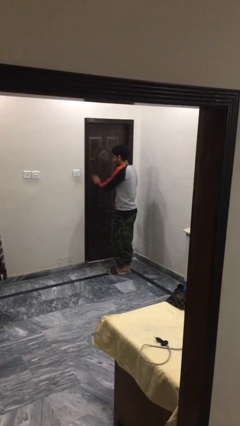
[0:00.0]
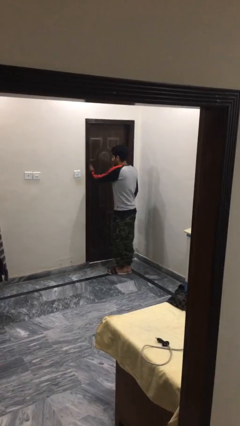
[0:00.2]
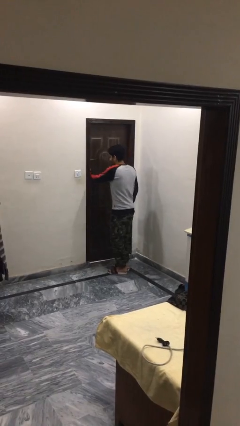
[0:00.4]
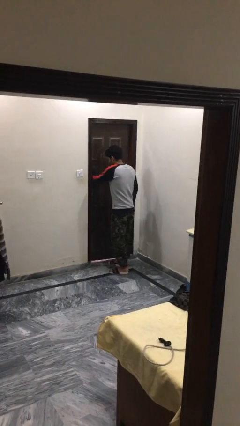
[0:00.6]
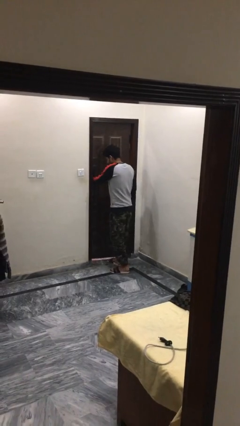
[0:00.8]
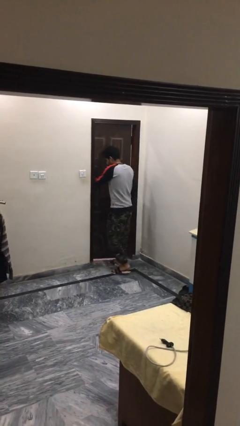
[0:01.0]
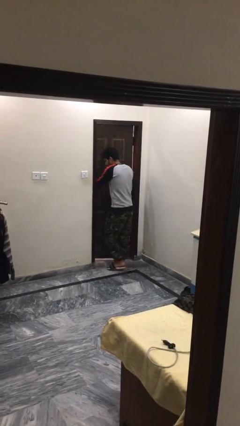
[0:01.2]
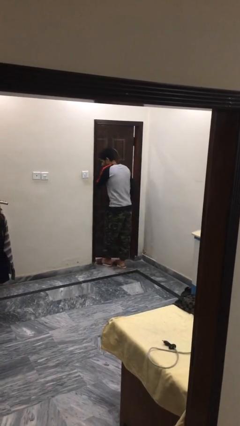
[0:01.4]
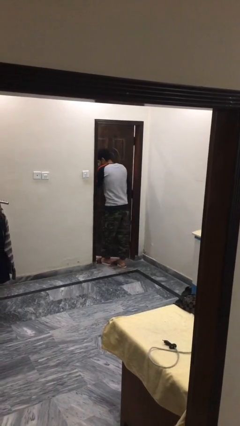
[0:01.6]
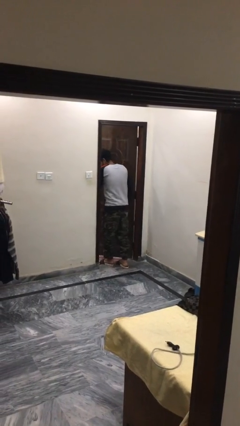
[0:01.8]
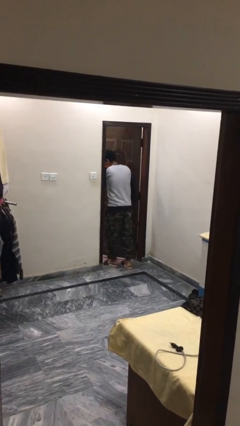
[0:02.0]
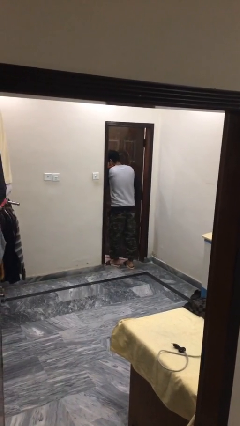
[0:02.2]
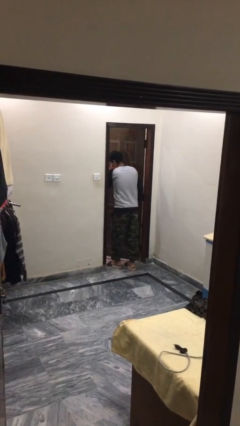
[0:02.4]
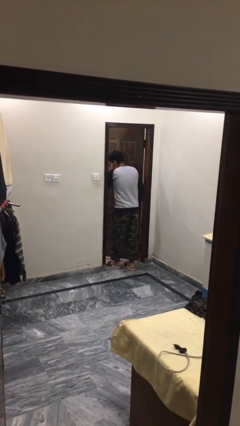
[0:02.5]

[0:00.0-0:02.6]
person opens facility door

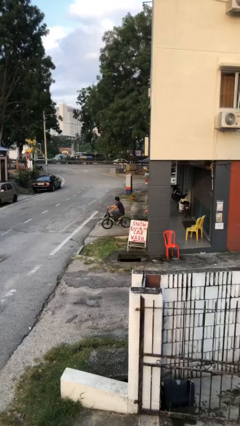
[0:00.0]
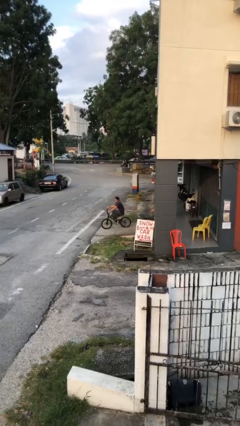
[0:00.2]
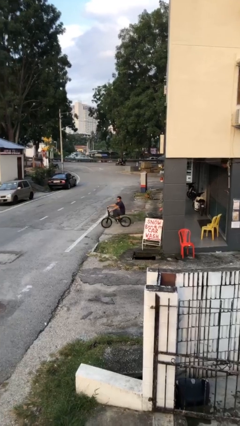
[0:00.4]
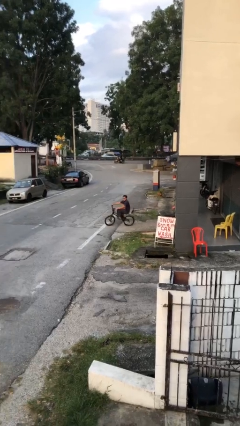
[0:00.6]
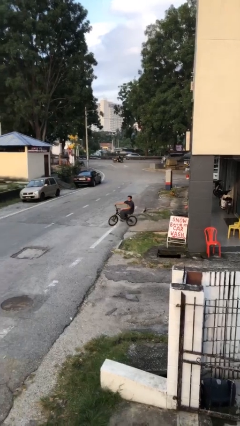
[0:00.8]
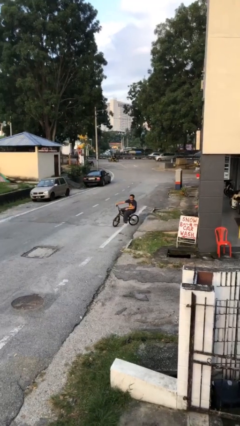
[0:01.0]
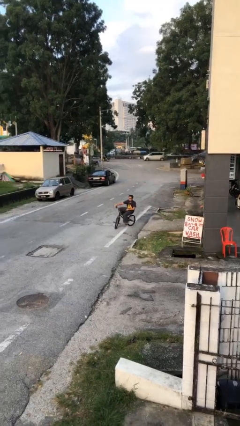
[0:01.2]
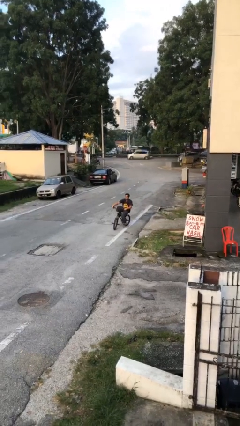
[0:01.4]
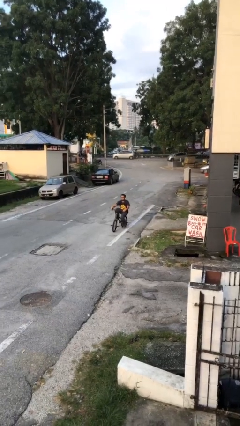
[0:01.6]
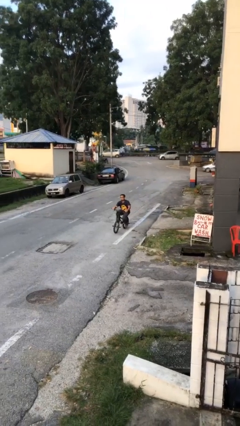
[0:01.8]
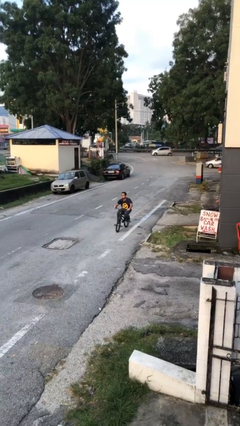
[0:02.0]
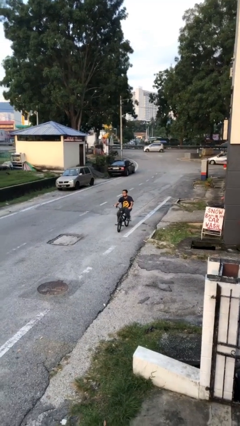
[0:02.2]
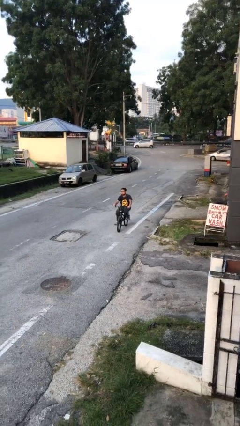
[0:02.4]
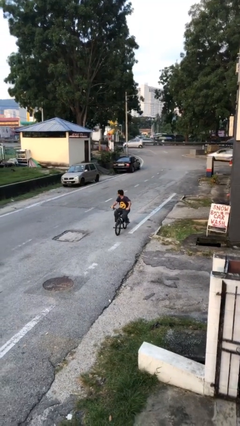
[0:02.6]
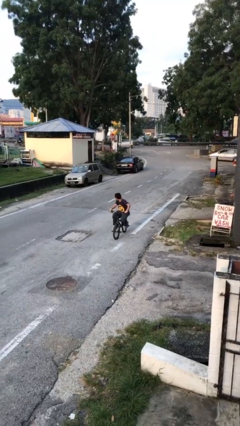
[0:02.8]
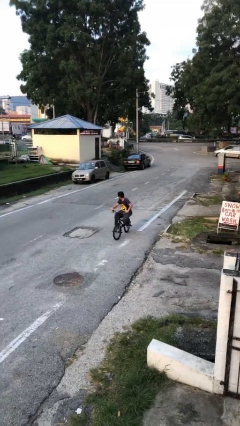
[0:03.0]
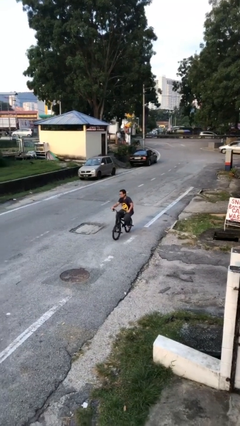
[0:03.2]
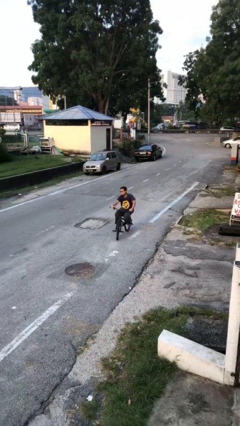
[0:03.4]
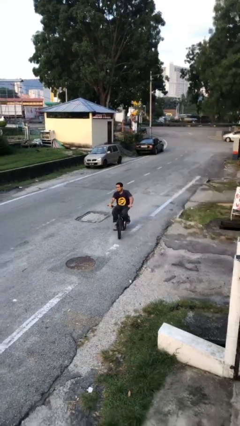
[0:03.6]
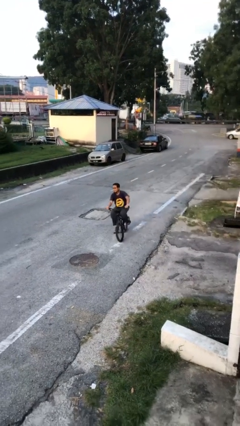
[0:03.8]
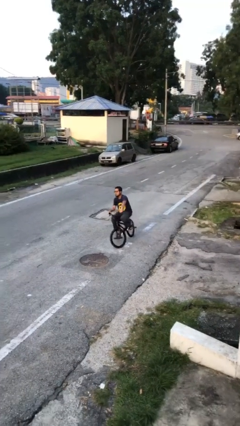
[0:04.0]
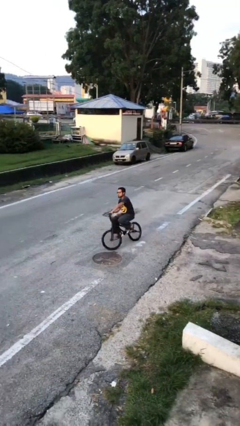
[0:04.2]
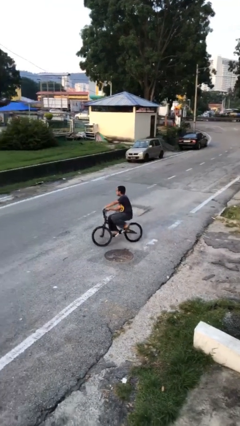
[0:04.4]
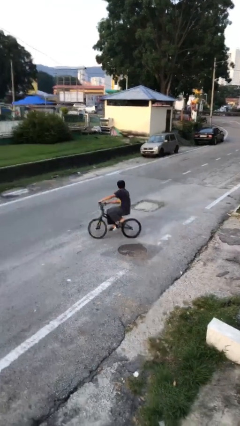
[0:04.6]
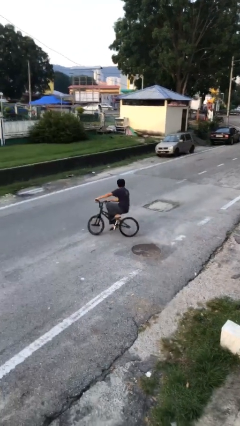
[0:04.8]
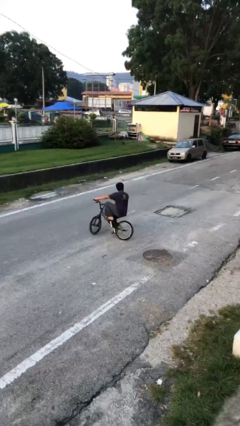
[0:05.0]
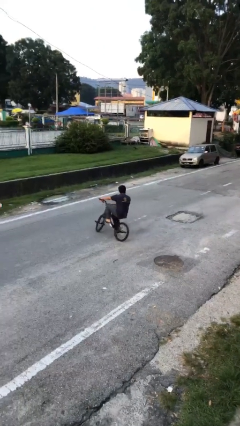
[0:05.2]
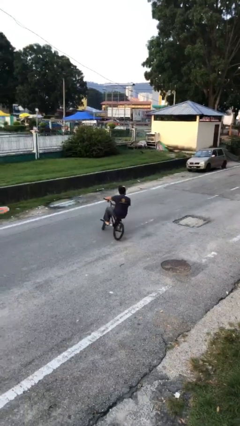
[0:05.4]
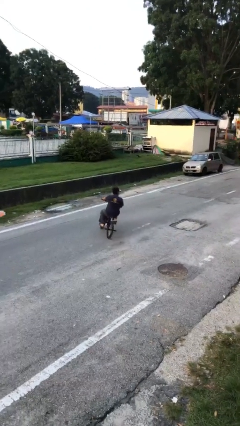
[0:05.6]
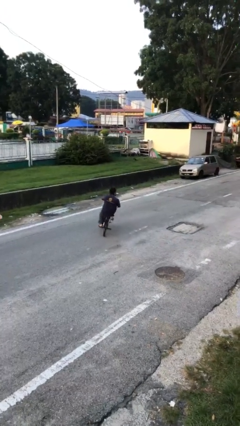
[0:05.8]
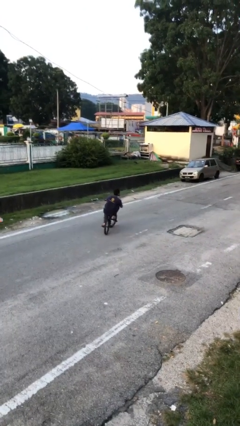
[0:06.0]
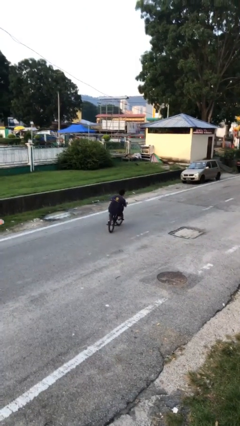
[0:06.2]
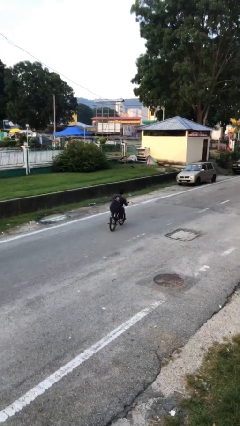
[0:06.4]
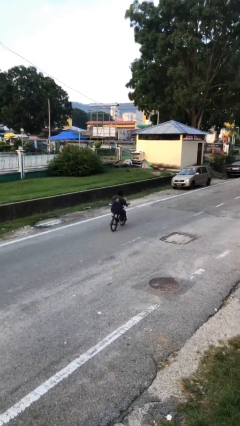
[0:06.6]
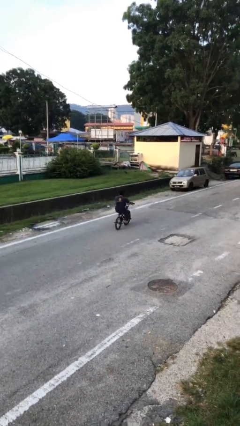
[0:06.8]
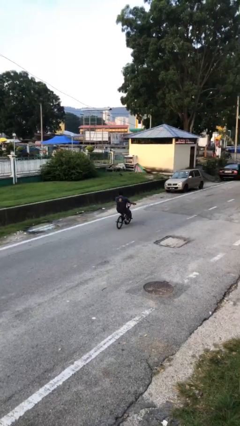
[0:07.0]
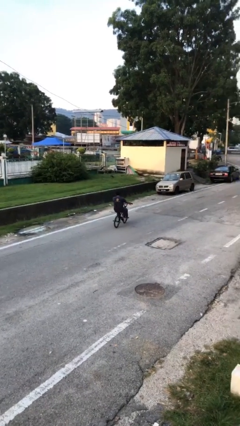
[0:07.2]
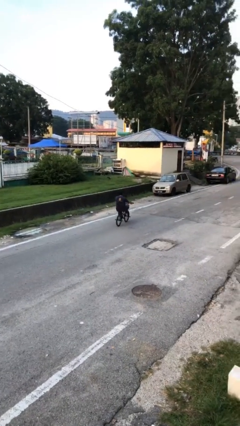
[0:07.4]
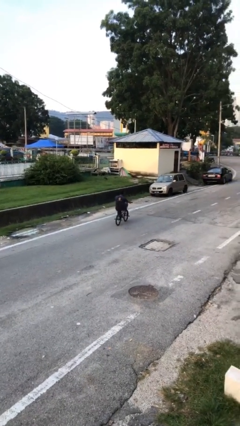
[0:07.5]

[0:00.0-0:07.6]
person rides bicycle

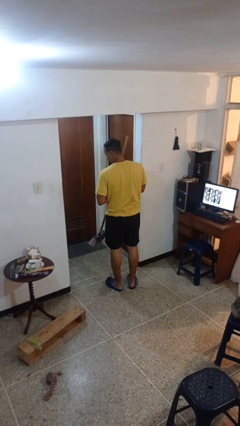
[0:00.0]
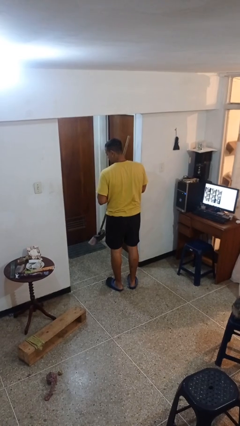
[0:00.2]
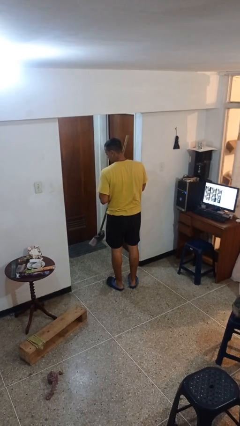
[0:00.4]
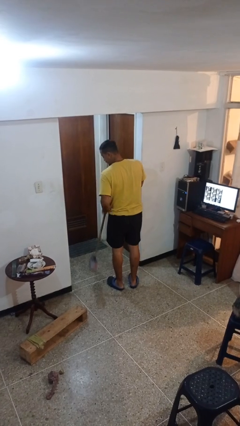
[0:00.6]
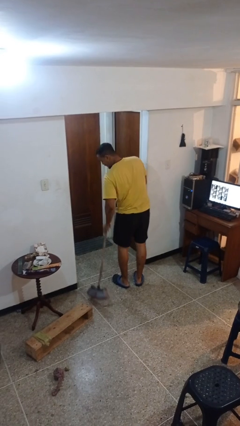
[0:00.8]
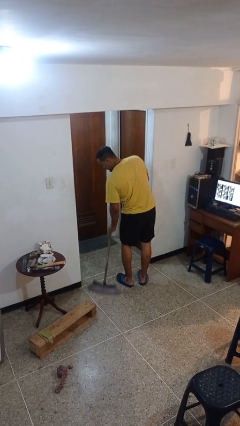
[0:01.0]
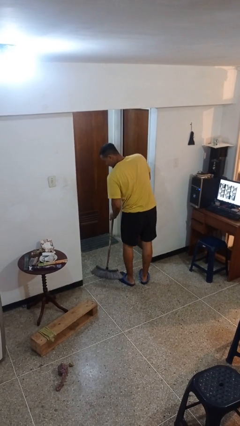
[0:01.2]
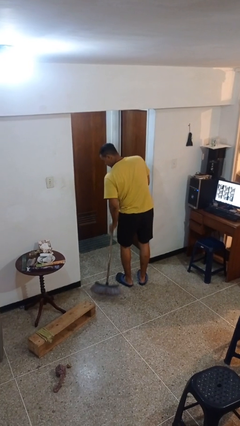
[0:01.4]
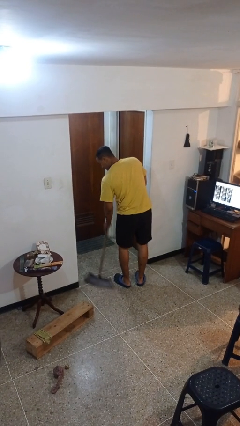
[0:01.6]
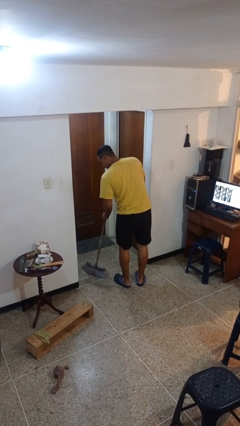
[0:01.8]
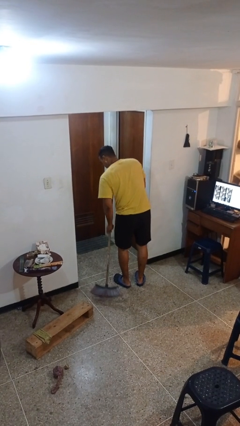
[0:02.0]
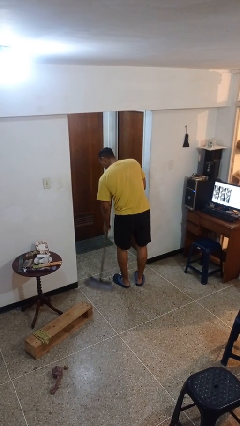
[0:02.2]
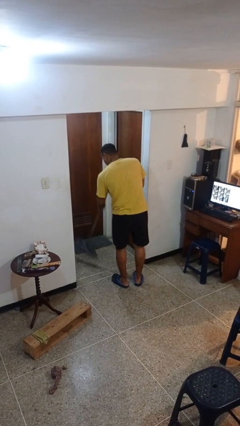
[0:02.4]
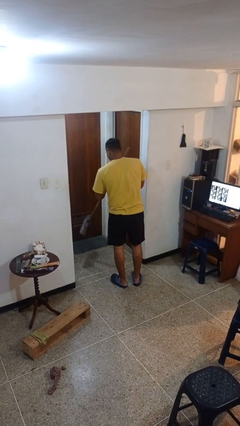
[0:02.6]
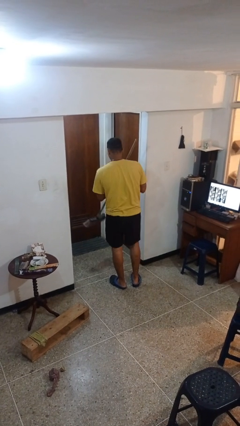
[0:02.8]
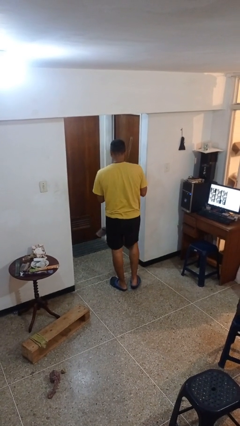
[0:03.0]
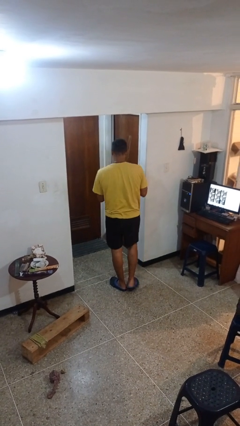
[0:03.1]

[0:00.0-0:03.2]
person sweeps floor

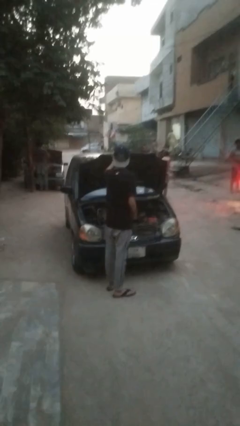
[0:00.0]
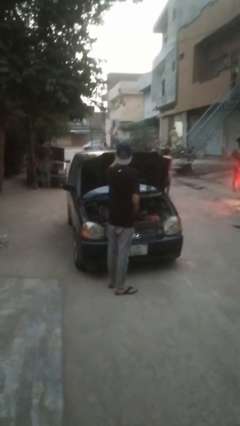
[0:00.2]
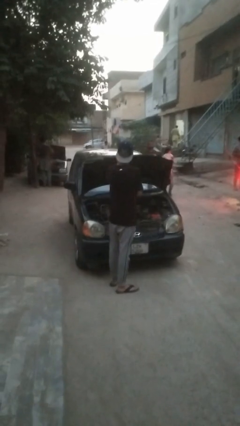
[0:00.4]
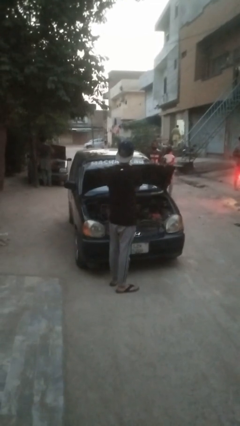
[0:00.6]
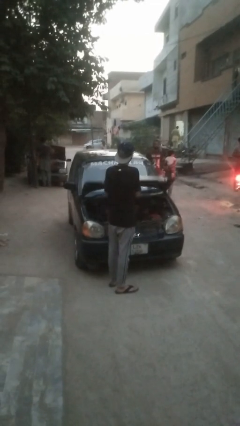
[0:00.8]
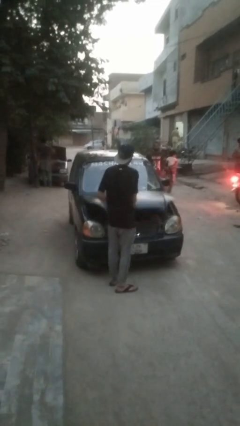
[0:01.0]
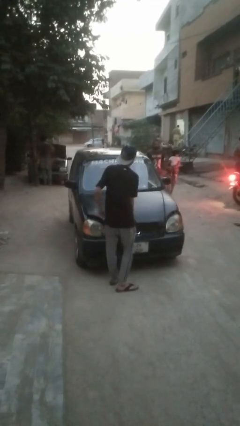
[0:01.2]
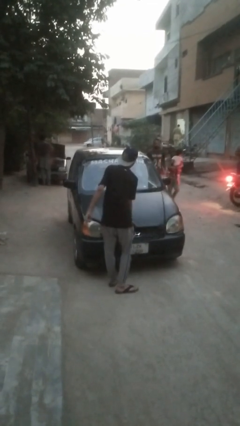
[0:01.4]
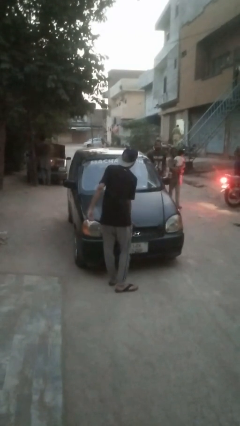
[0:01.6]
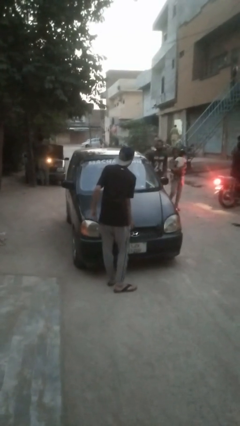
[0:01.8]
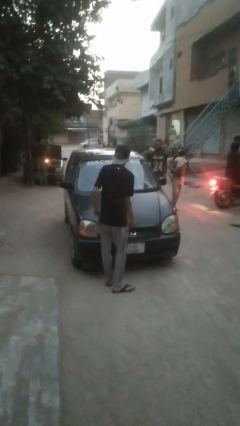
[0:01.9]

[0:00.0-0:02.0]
person closes car hood

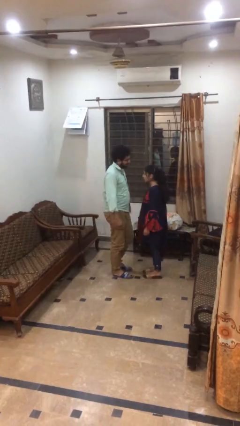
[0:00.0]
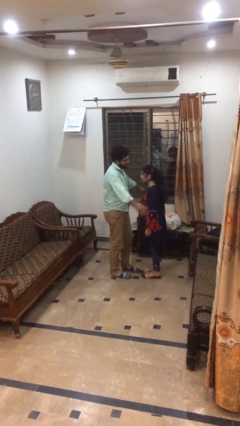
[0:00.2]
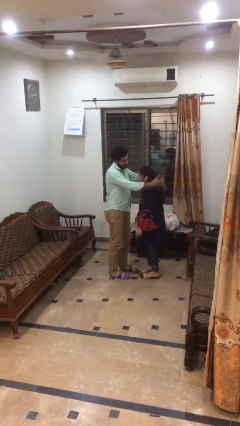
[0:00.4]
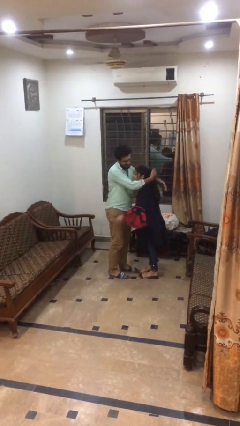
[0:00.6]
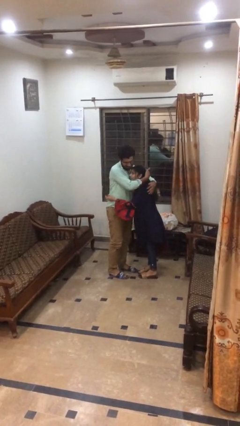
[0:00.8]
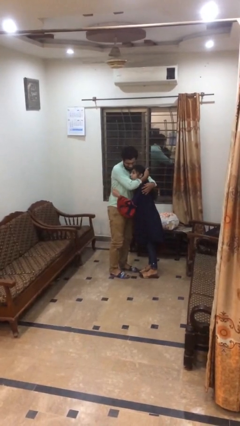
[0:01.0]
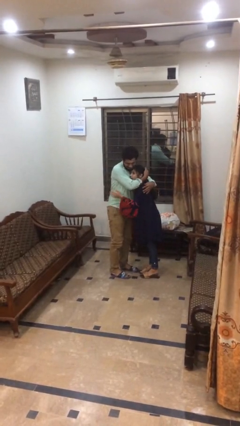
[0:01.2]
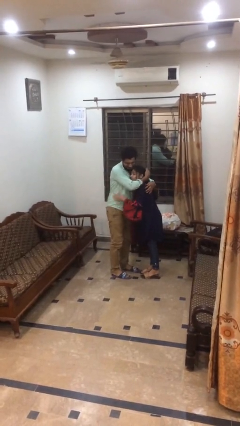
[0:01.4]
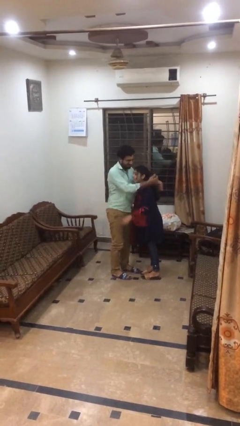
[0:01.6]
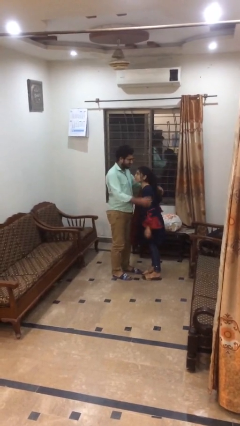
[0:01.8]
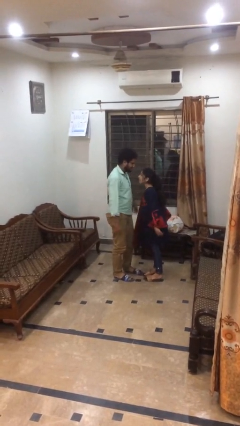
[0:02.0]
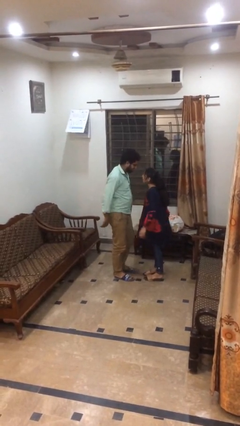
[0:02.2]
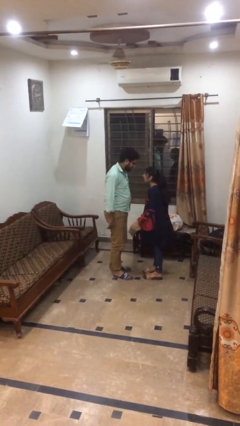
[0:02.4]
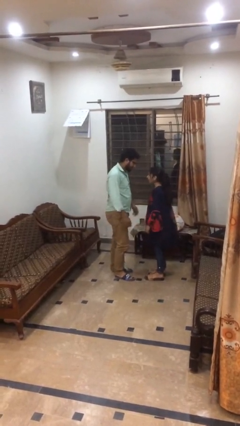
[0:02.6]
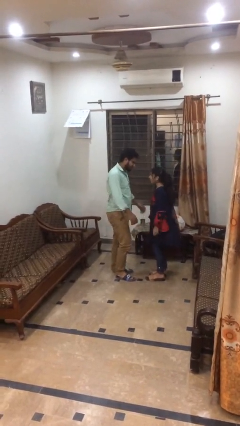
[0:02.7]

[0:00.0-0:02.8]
person embraces person
